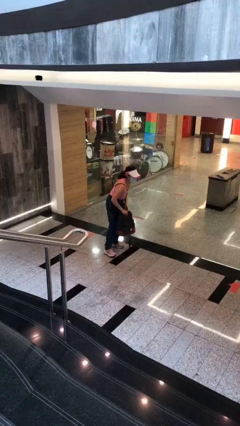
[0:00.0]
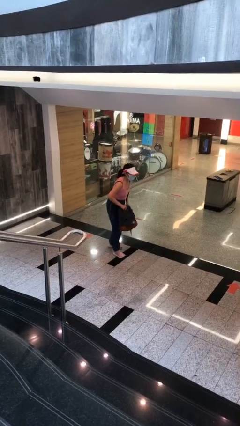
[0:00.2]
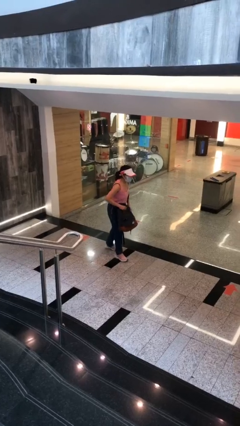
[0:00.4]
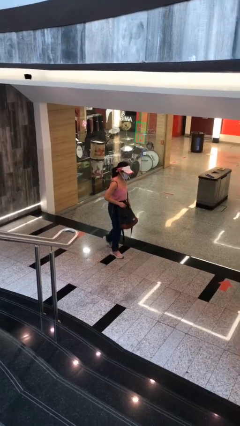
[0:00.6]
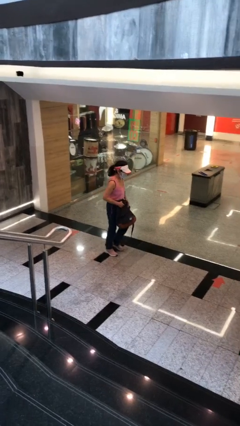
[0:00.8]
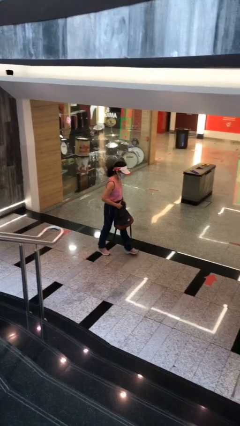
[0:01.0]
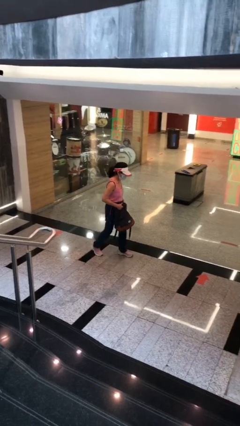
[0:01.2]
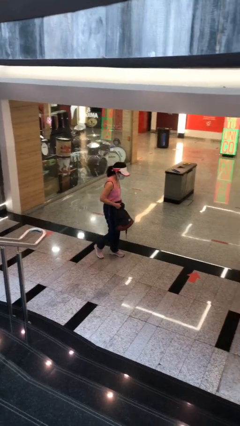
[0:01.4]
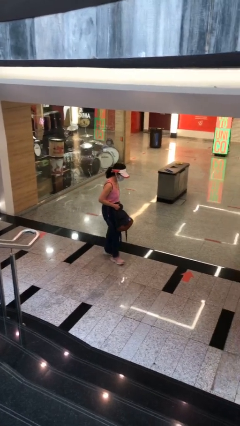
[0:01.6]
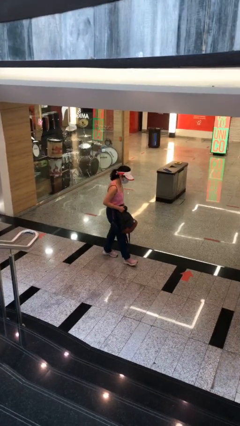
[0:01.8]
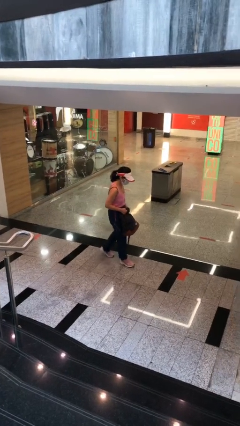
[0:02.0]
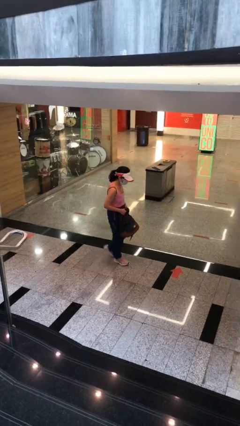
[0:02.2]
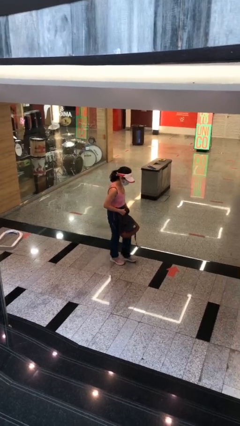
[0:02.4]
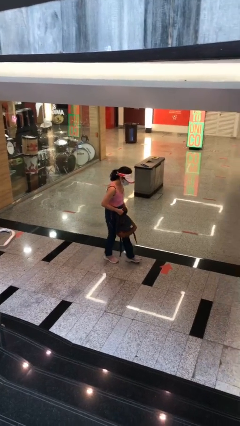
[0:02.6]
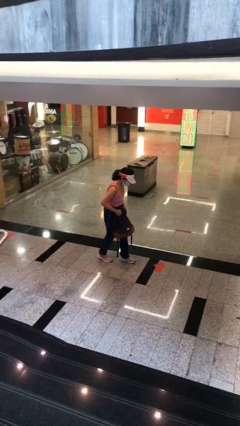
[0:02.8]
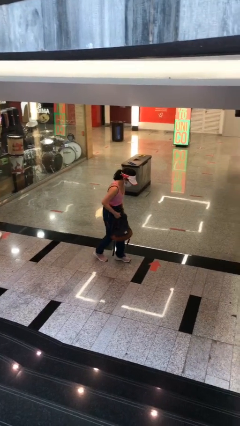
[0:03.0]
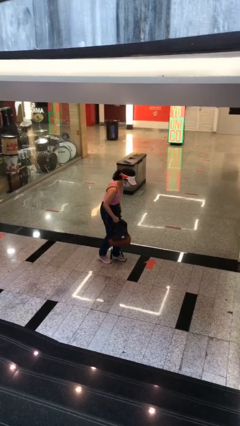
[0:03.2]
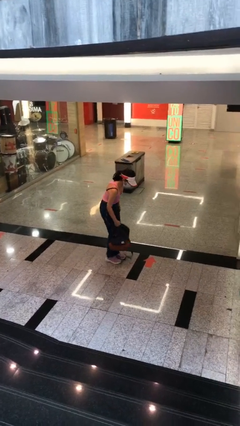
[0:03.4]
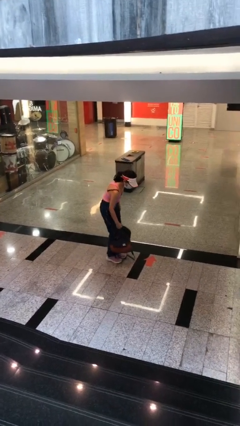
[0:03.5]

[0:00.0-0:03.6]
person carries heavy object

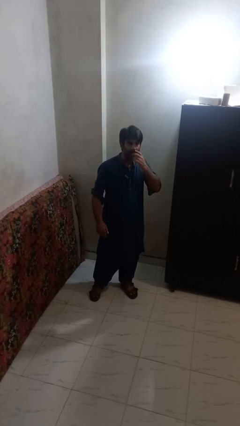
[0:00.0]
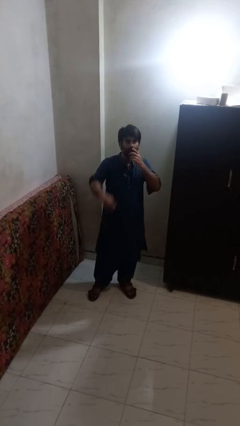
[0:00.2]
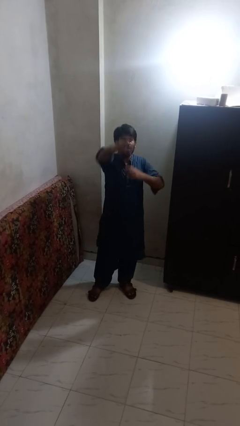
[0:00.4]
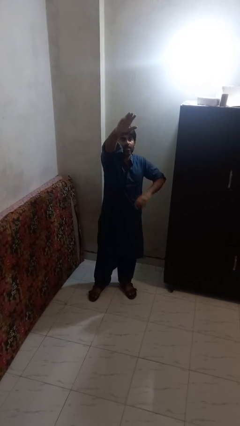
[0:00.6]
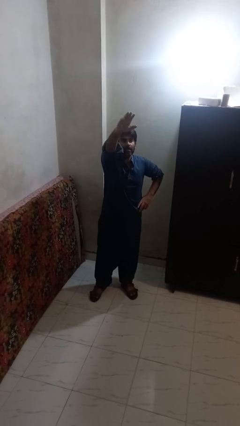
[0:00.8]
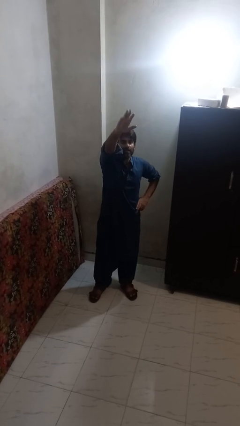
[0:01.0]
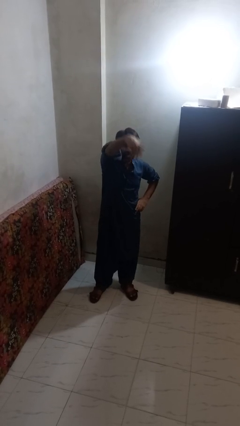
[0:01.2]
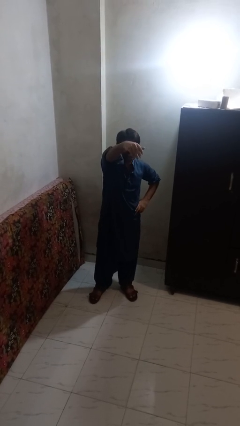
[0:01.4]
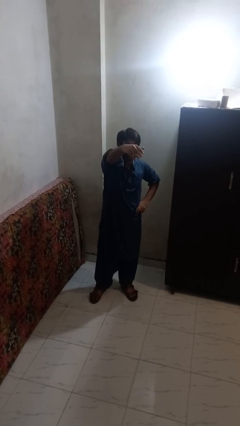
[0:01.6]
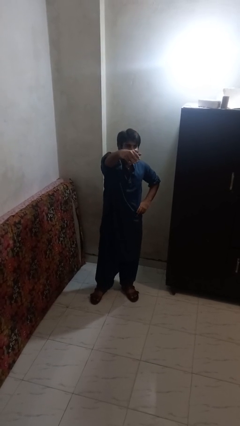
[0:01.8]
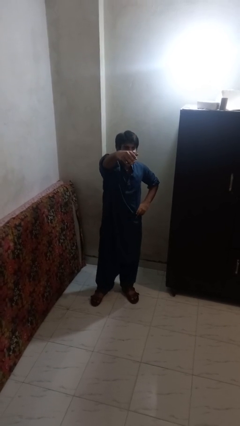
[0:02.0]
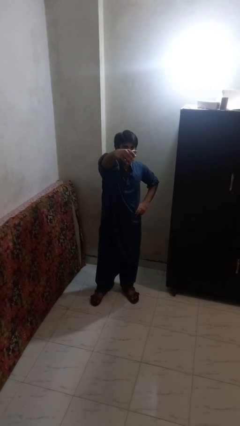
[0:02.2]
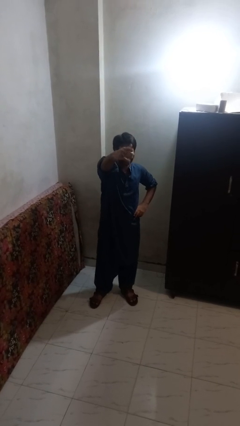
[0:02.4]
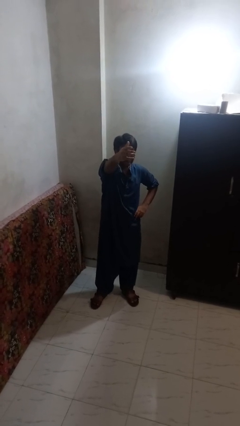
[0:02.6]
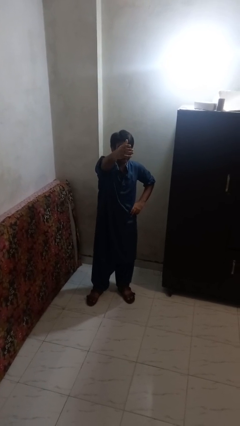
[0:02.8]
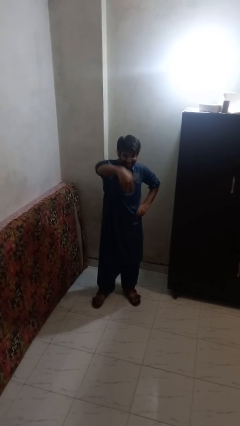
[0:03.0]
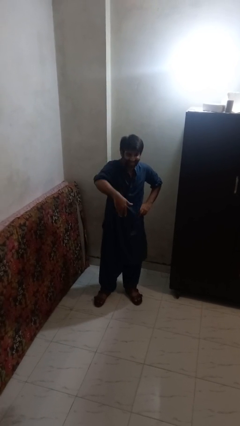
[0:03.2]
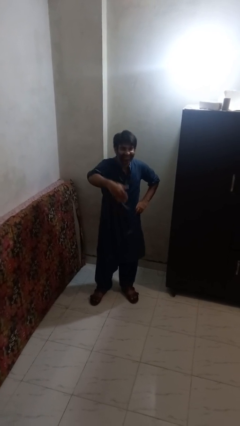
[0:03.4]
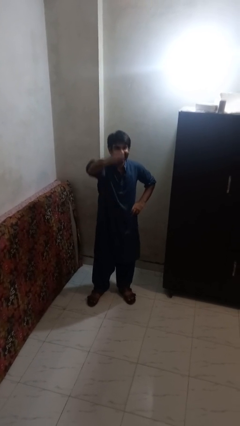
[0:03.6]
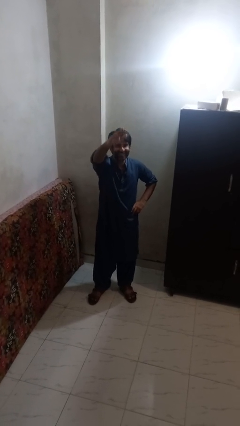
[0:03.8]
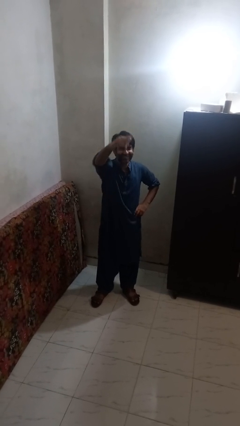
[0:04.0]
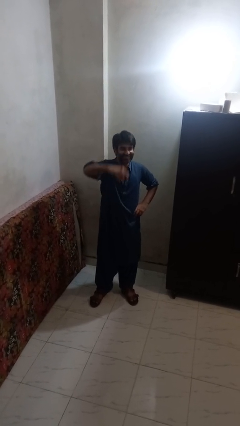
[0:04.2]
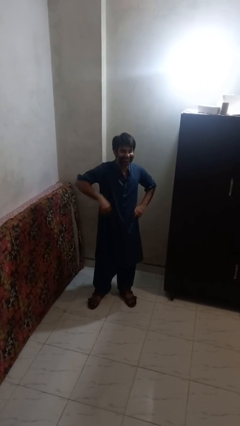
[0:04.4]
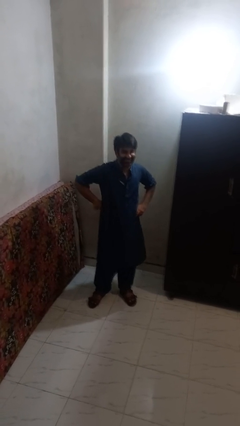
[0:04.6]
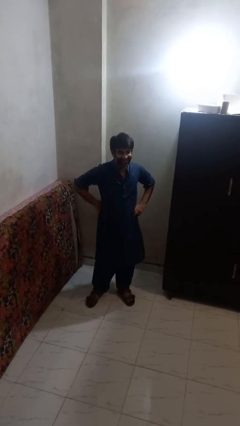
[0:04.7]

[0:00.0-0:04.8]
person gestures come here

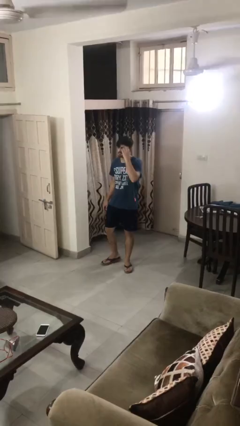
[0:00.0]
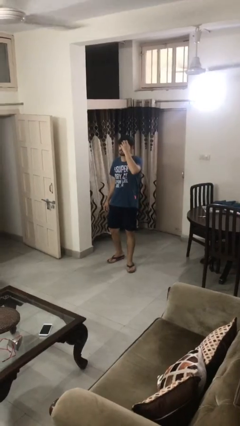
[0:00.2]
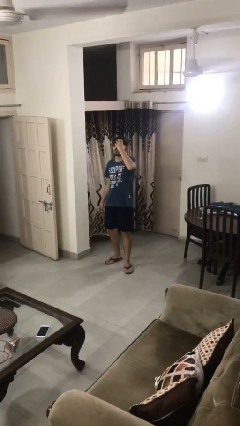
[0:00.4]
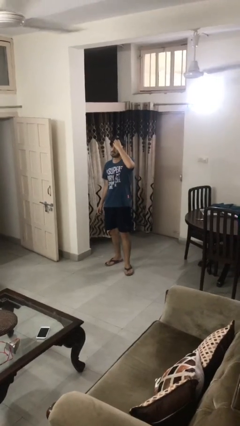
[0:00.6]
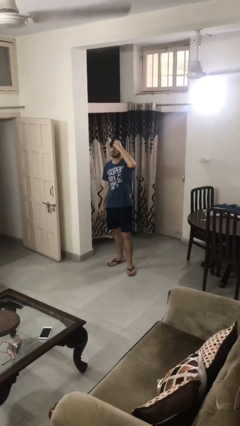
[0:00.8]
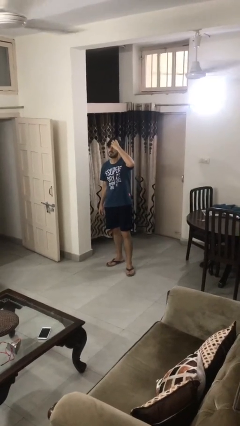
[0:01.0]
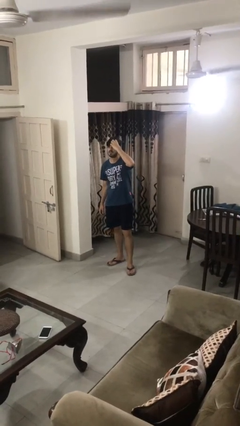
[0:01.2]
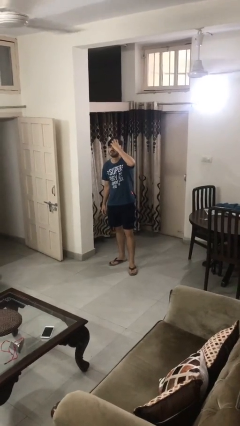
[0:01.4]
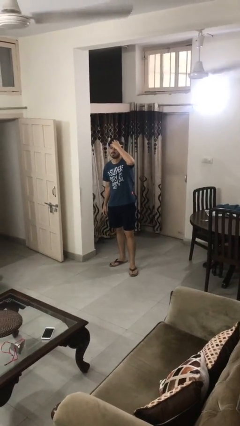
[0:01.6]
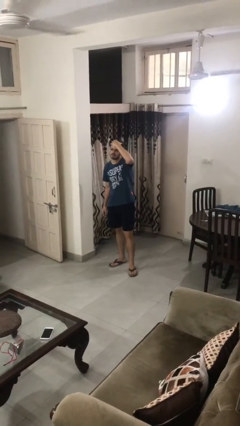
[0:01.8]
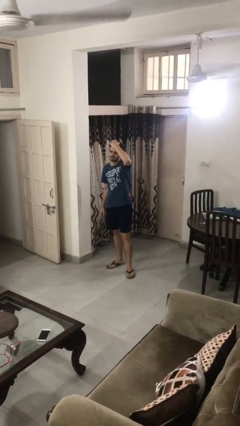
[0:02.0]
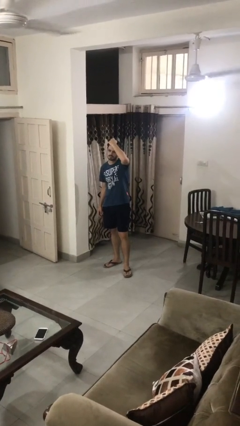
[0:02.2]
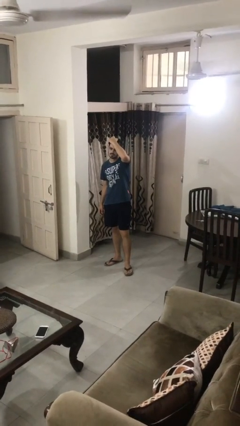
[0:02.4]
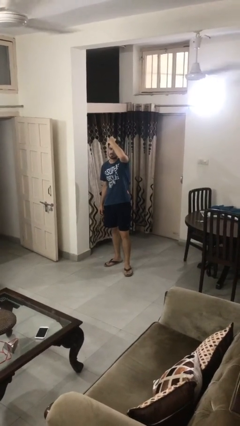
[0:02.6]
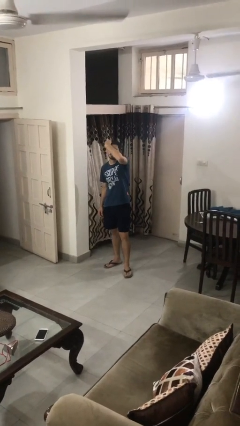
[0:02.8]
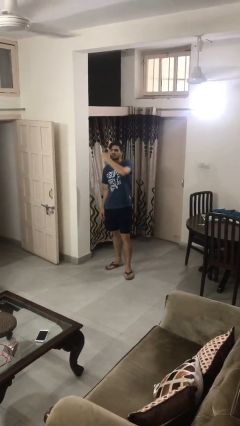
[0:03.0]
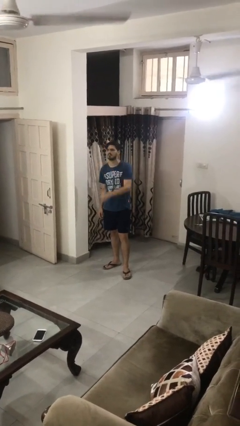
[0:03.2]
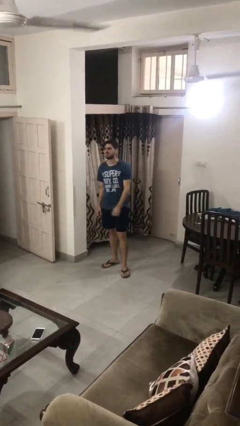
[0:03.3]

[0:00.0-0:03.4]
person scratches face

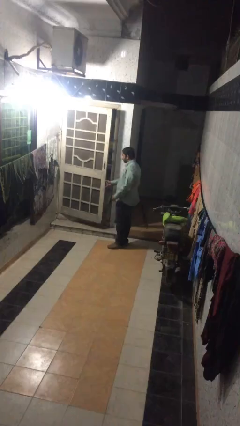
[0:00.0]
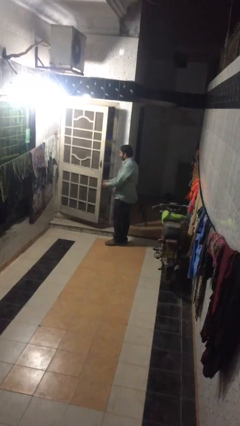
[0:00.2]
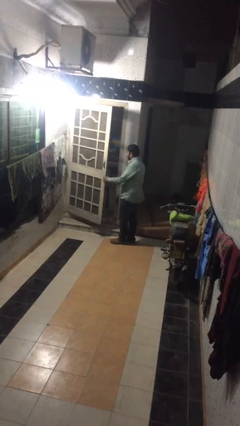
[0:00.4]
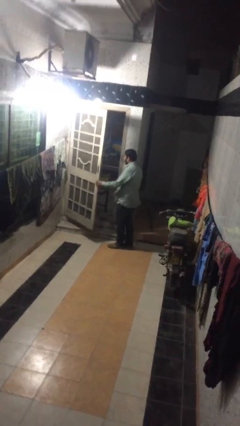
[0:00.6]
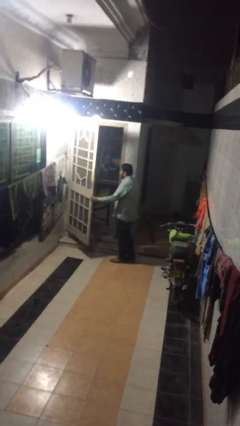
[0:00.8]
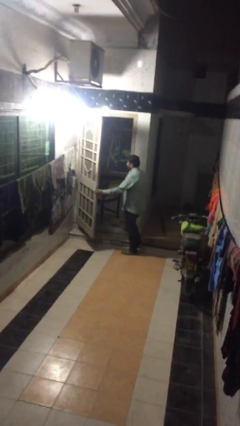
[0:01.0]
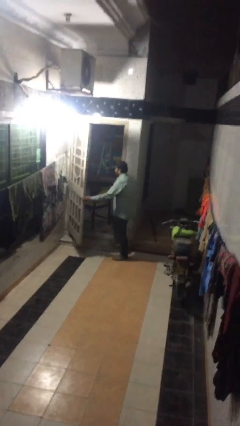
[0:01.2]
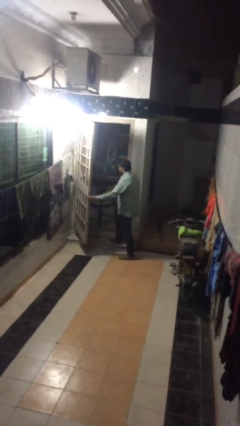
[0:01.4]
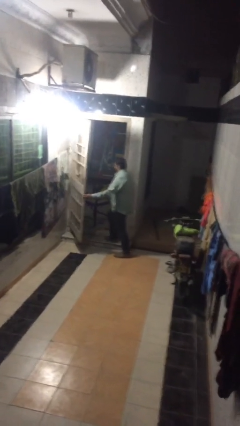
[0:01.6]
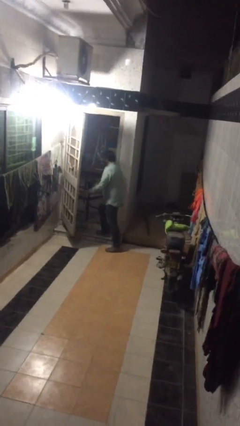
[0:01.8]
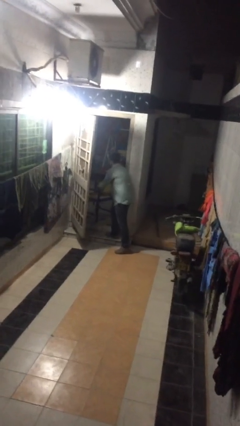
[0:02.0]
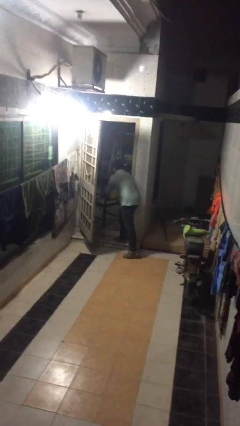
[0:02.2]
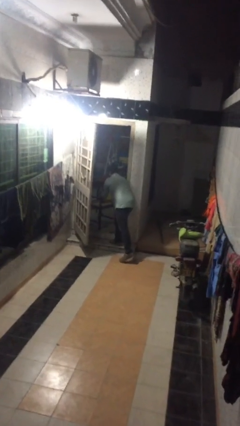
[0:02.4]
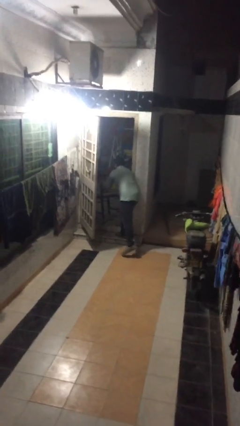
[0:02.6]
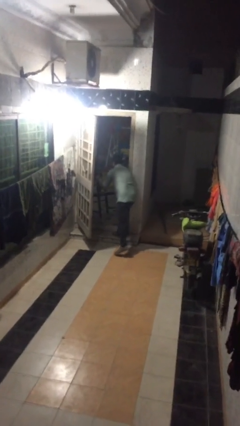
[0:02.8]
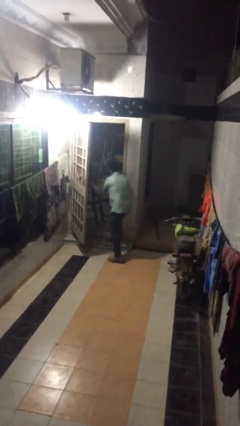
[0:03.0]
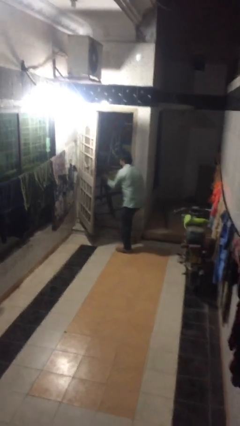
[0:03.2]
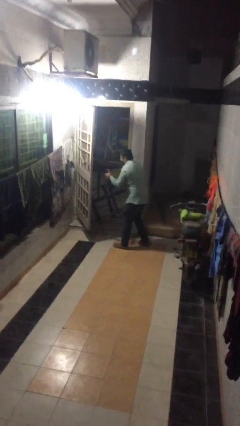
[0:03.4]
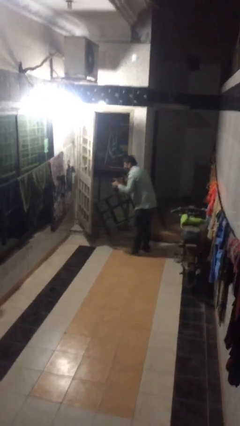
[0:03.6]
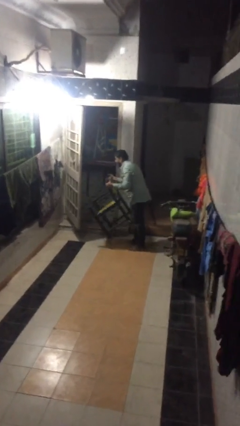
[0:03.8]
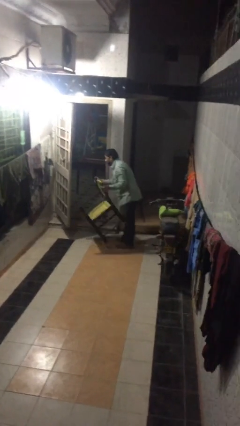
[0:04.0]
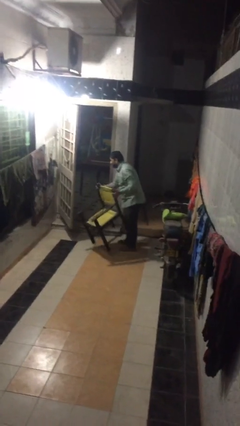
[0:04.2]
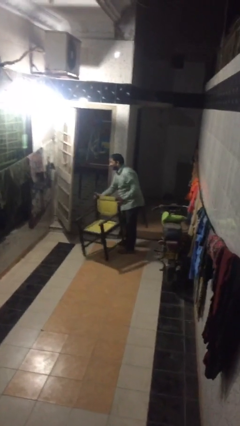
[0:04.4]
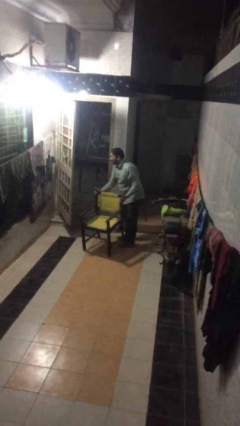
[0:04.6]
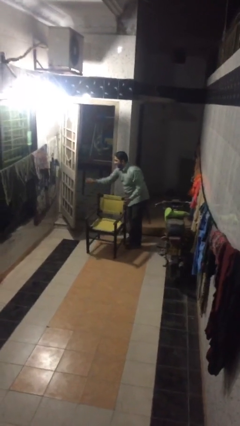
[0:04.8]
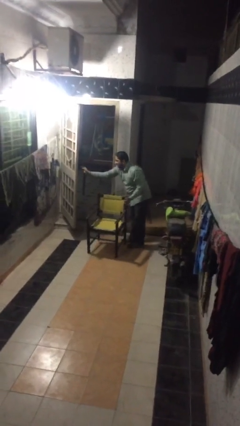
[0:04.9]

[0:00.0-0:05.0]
person stands up

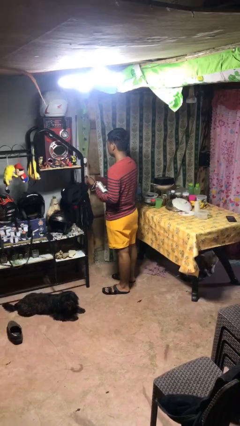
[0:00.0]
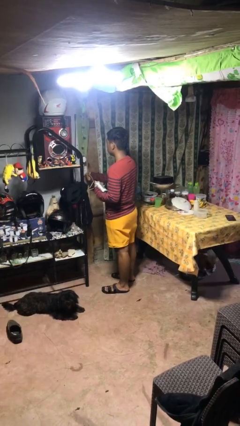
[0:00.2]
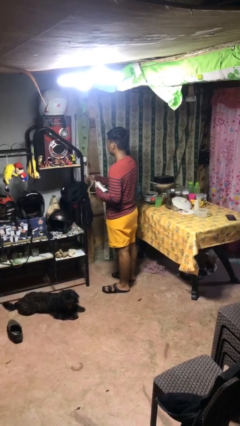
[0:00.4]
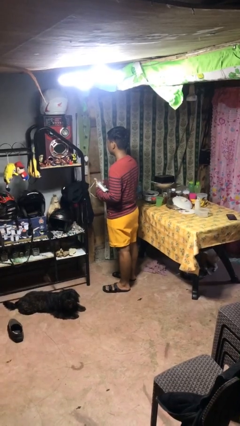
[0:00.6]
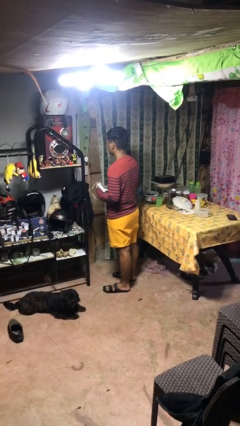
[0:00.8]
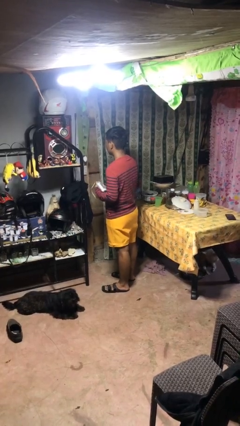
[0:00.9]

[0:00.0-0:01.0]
person unplugs from electrical socket
